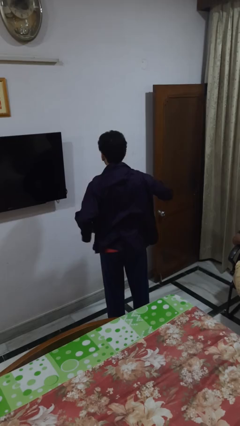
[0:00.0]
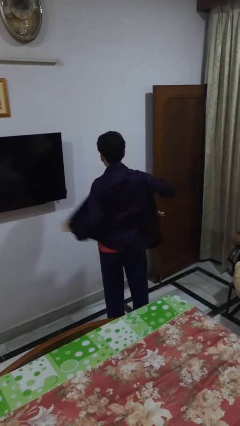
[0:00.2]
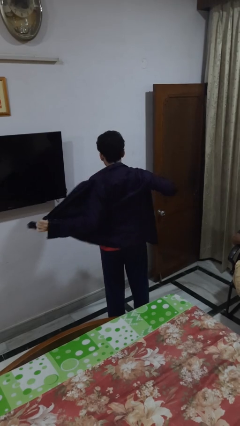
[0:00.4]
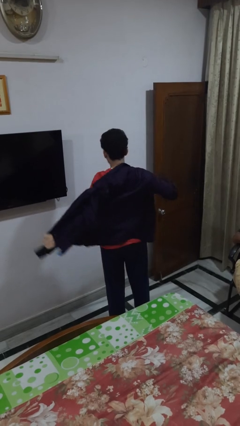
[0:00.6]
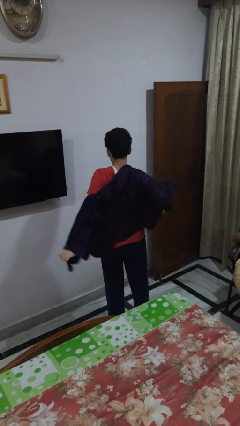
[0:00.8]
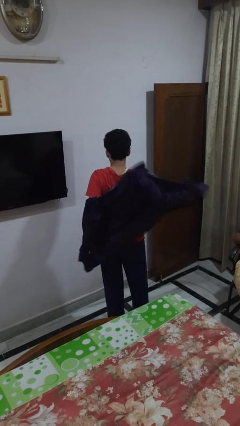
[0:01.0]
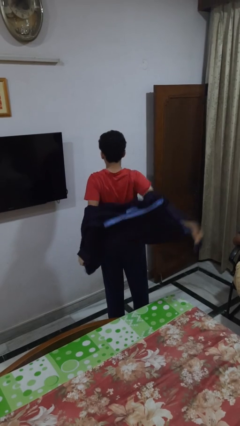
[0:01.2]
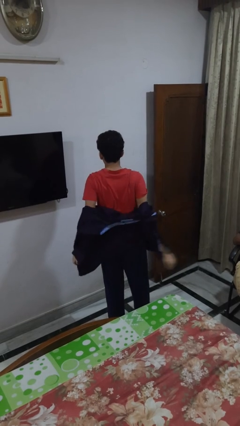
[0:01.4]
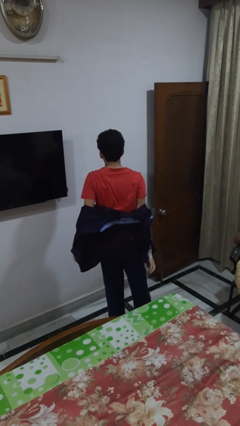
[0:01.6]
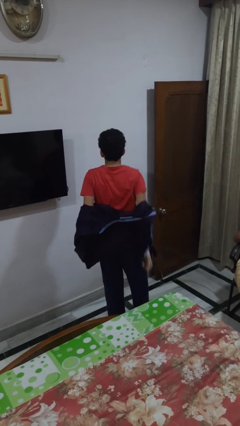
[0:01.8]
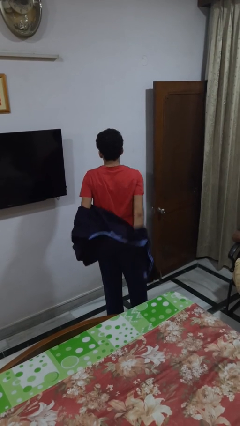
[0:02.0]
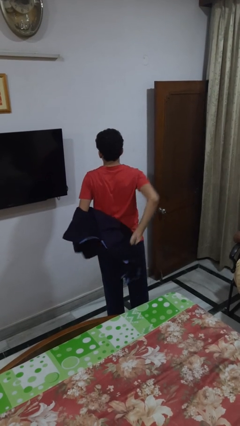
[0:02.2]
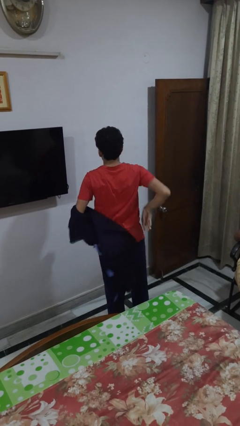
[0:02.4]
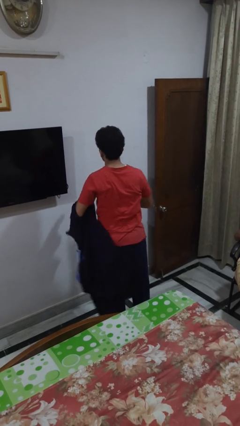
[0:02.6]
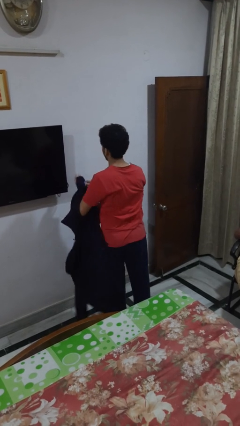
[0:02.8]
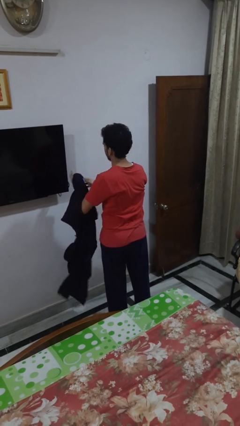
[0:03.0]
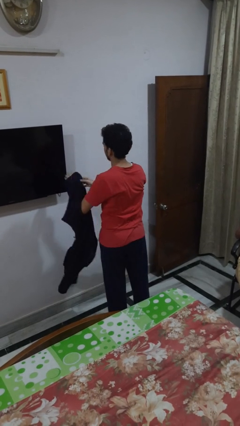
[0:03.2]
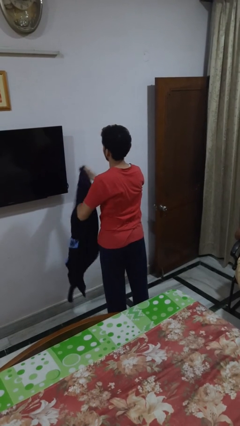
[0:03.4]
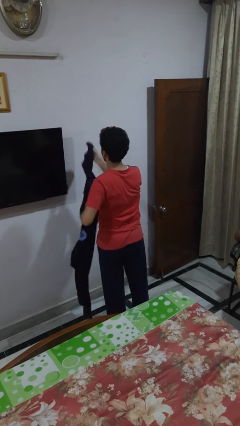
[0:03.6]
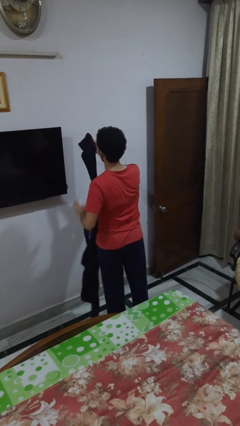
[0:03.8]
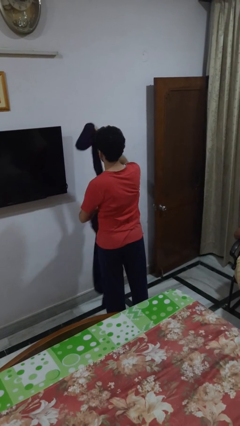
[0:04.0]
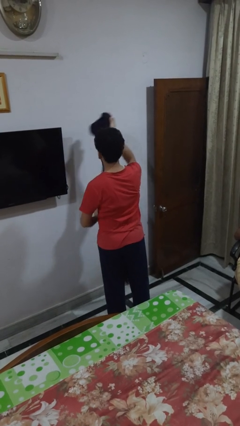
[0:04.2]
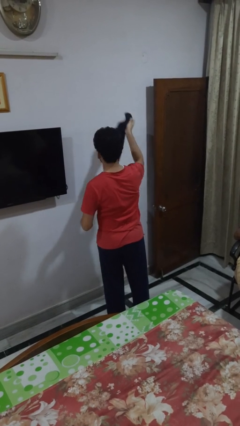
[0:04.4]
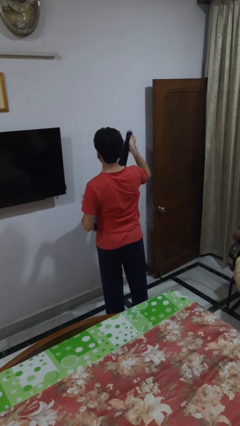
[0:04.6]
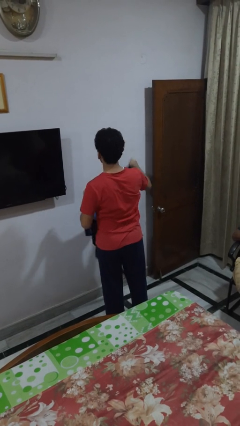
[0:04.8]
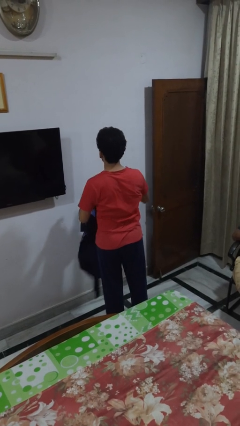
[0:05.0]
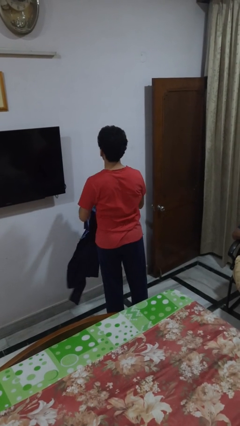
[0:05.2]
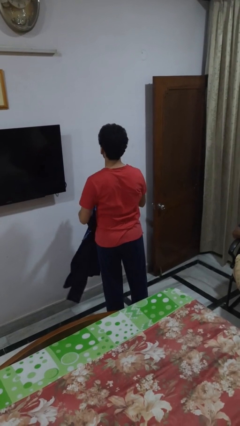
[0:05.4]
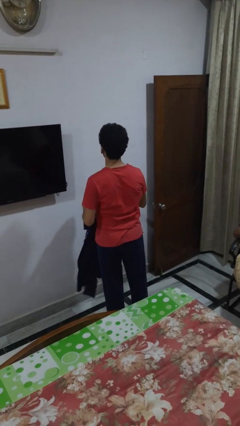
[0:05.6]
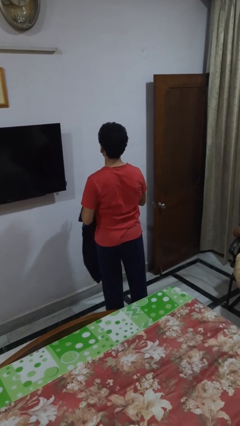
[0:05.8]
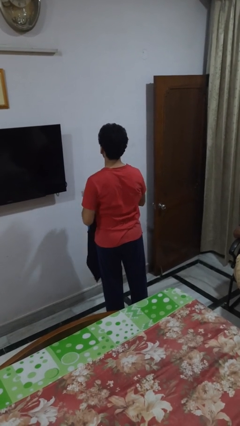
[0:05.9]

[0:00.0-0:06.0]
person takes off shirt

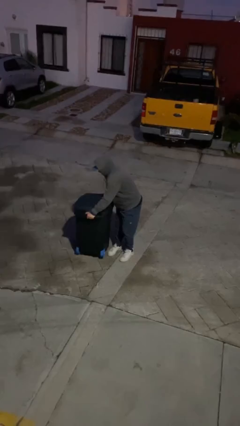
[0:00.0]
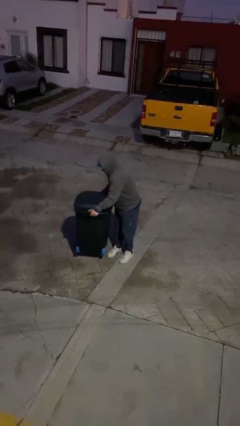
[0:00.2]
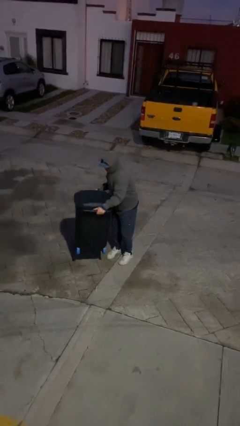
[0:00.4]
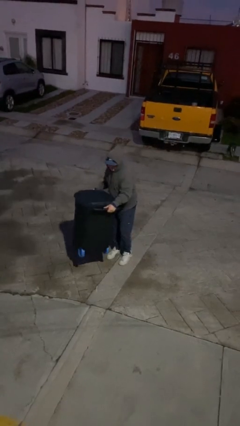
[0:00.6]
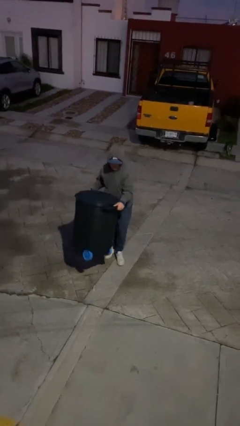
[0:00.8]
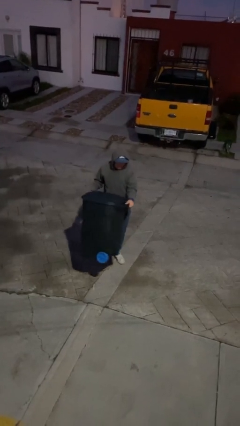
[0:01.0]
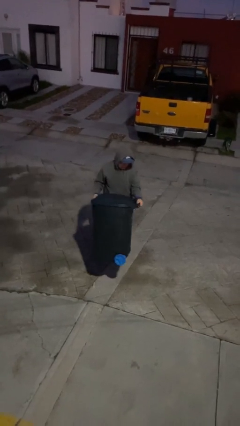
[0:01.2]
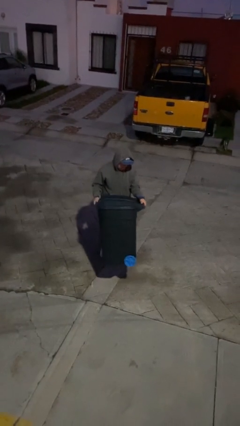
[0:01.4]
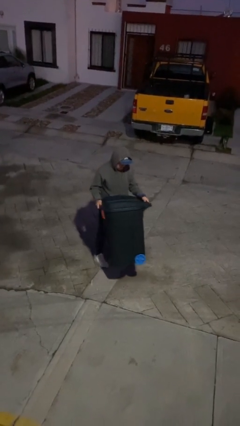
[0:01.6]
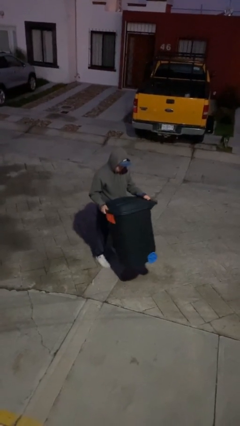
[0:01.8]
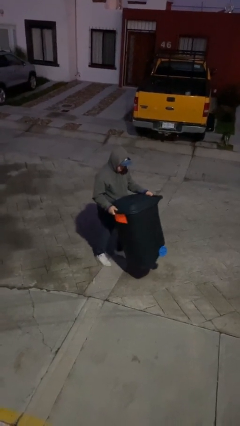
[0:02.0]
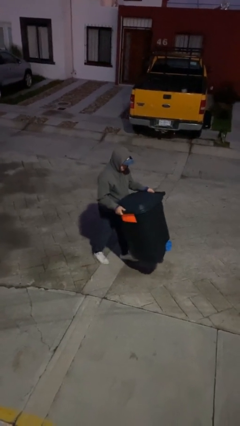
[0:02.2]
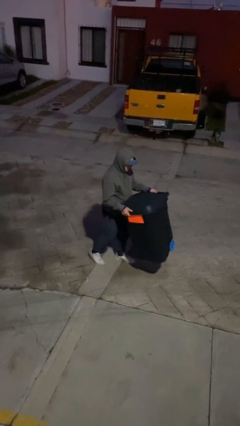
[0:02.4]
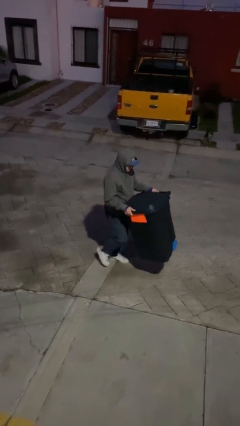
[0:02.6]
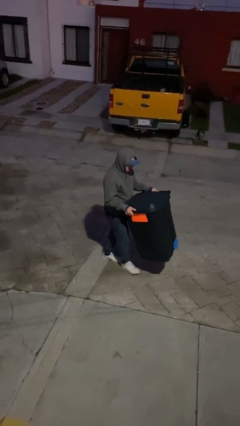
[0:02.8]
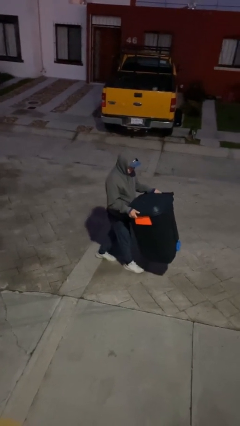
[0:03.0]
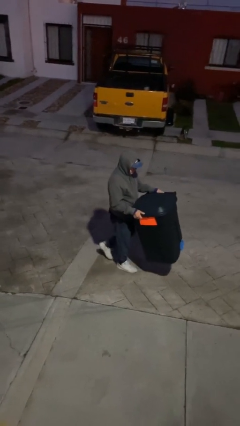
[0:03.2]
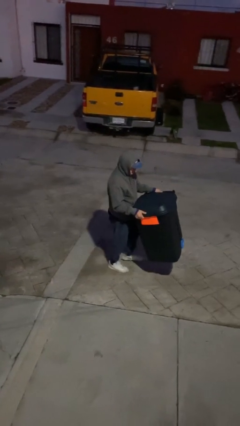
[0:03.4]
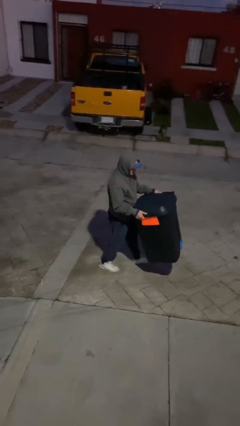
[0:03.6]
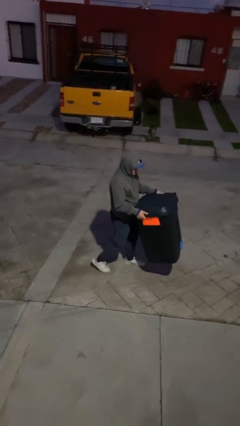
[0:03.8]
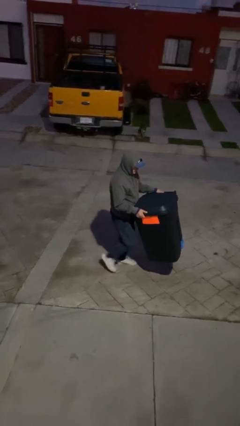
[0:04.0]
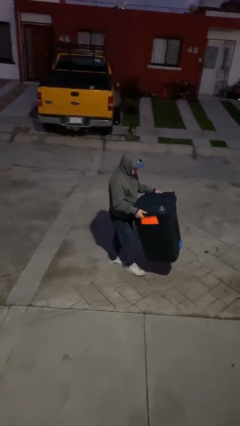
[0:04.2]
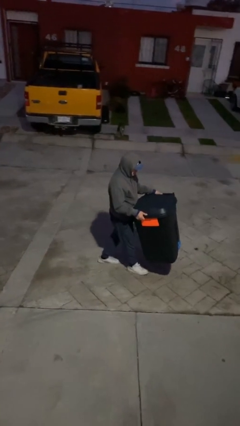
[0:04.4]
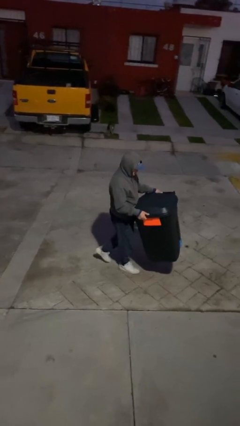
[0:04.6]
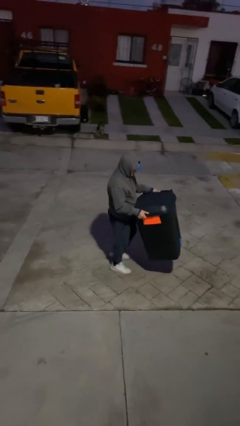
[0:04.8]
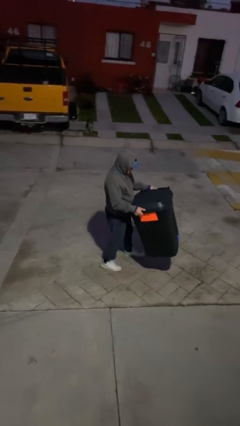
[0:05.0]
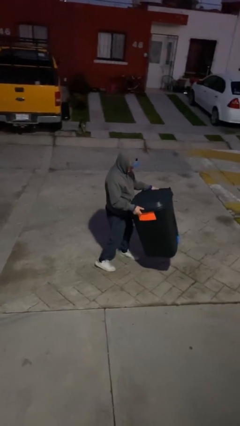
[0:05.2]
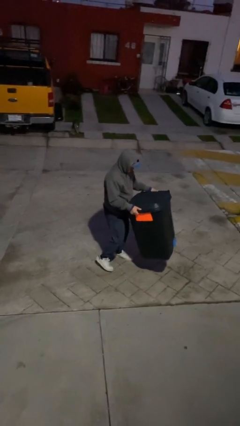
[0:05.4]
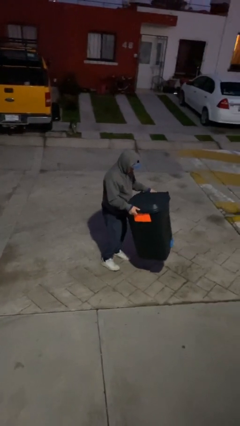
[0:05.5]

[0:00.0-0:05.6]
person carries heavy object

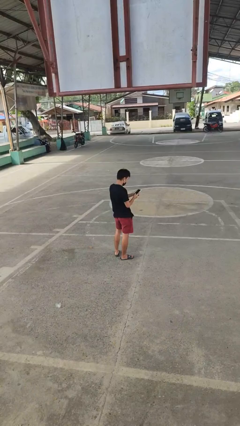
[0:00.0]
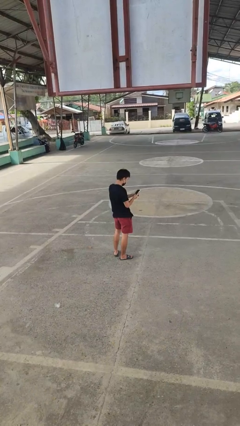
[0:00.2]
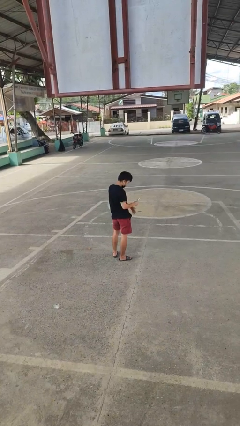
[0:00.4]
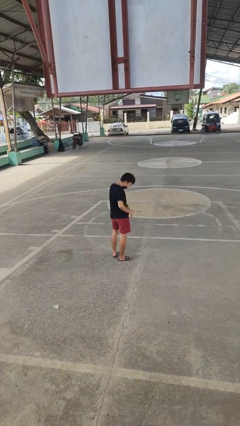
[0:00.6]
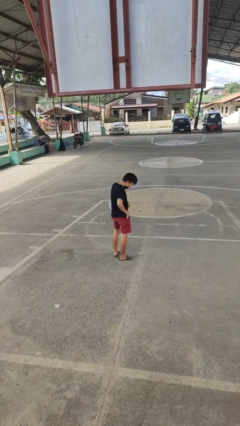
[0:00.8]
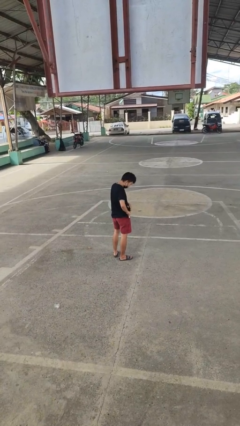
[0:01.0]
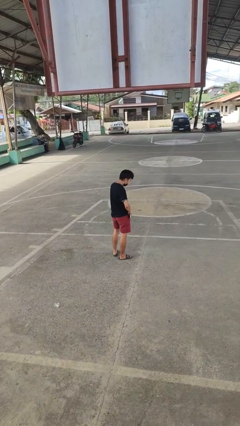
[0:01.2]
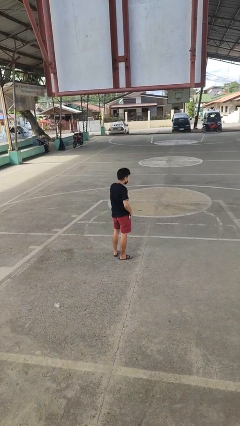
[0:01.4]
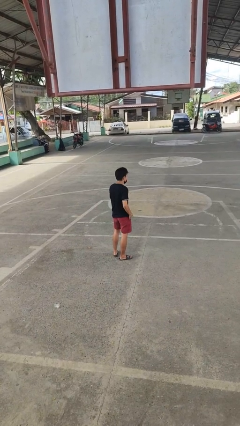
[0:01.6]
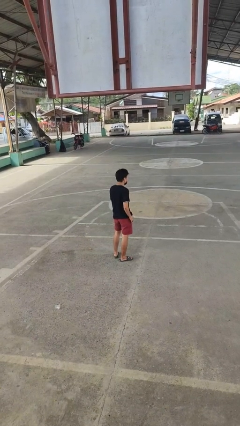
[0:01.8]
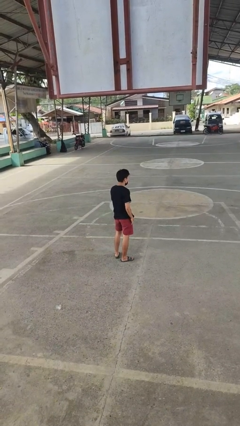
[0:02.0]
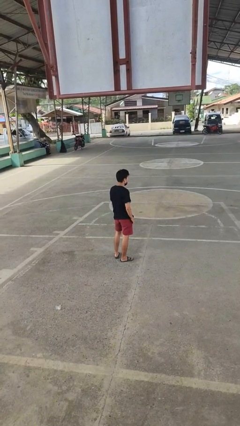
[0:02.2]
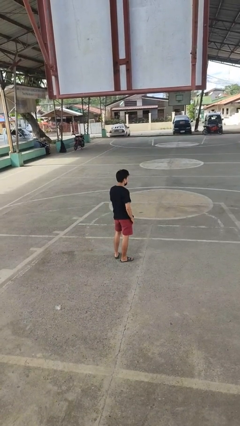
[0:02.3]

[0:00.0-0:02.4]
person puts phone into pocket

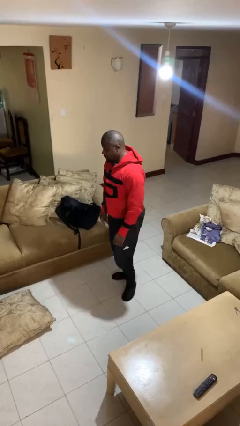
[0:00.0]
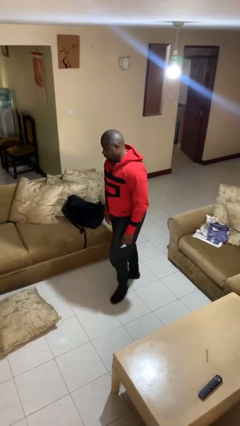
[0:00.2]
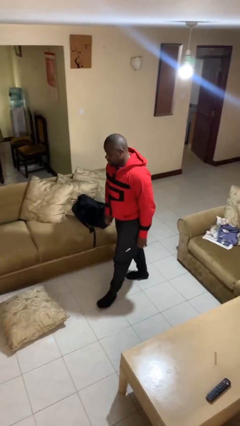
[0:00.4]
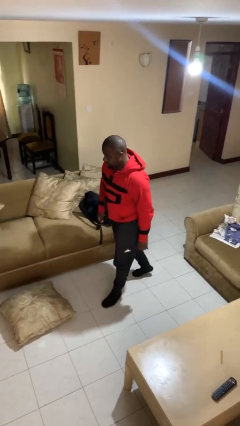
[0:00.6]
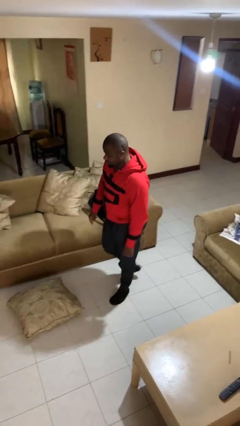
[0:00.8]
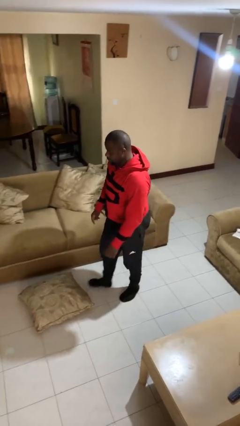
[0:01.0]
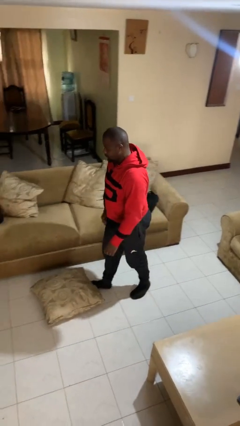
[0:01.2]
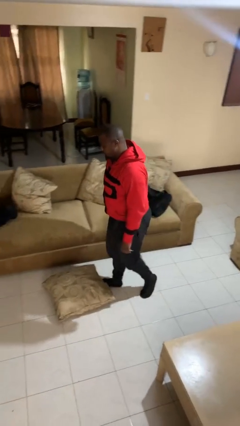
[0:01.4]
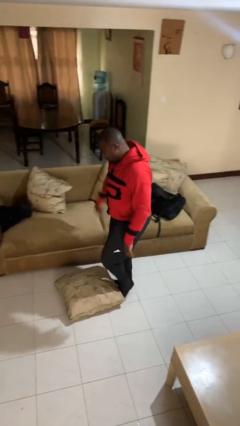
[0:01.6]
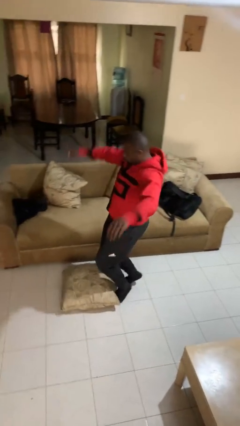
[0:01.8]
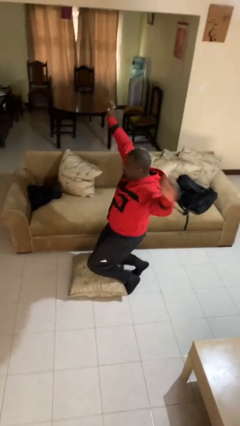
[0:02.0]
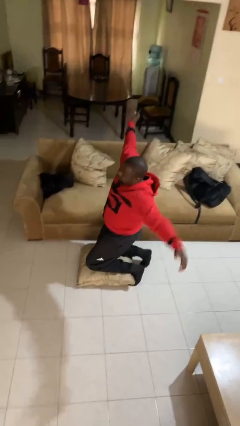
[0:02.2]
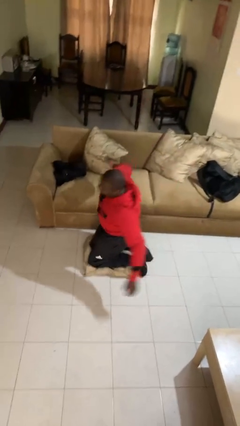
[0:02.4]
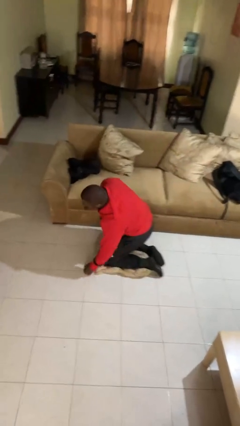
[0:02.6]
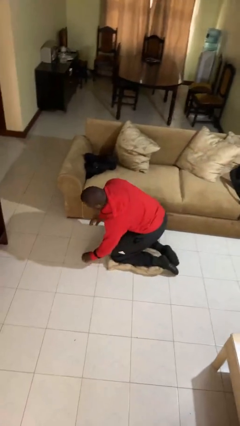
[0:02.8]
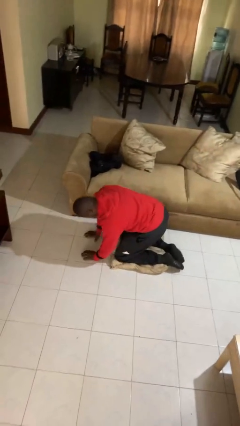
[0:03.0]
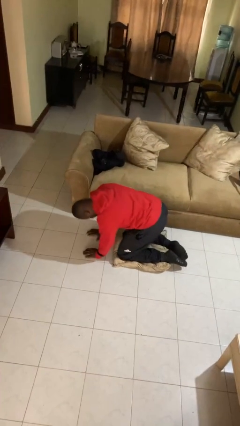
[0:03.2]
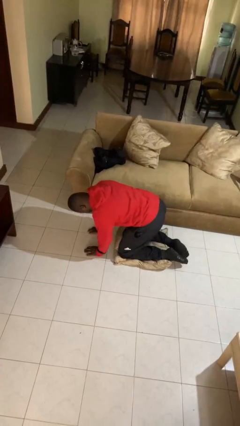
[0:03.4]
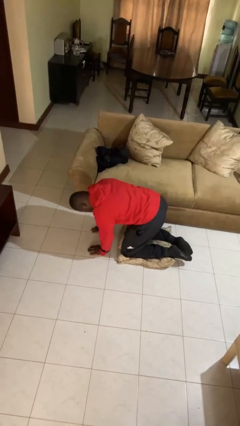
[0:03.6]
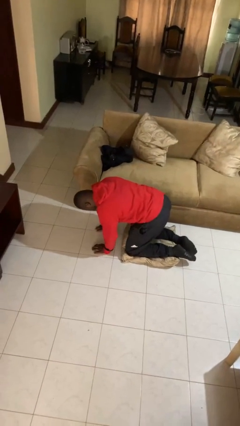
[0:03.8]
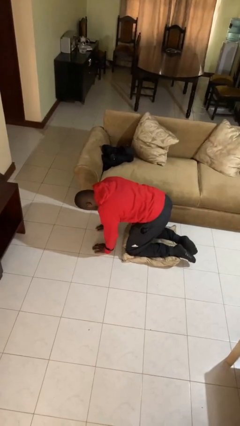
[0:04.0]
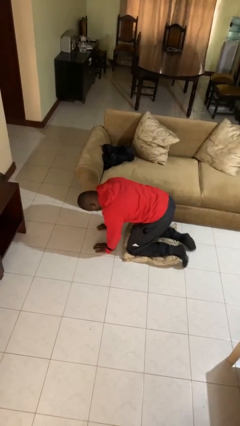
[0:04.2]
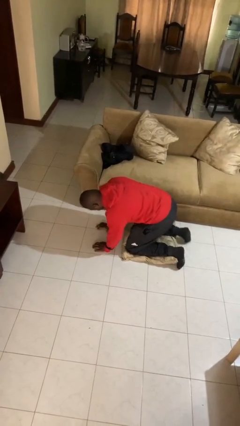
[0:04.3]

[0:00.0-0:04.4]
person trips on object on floor
